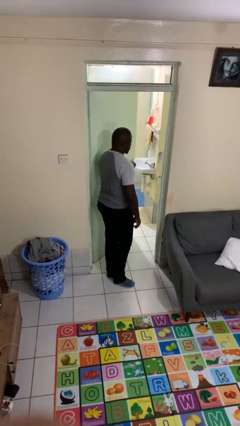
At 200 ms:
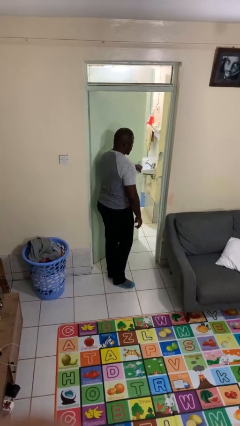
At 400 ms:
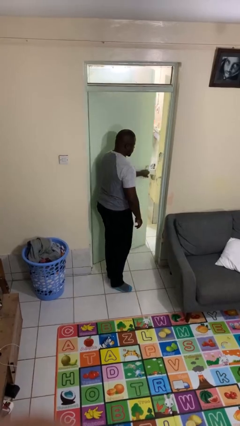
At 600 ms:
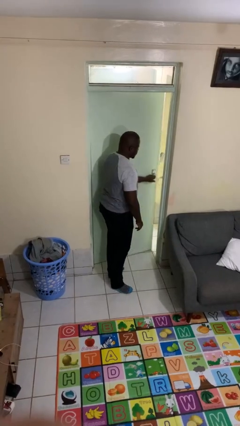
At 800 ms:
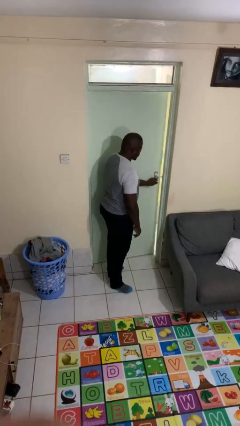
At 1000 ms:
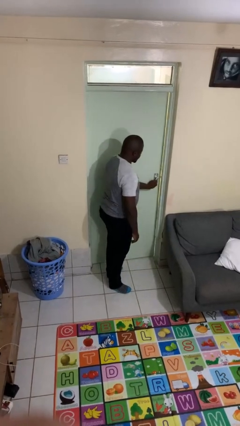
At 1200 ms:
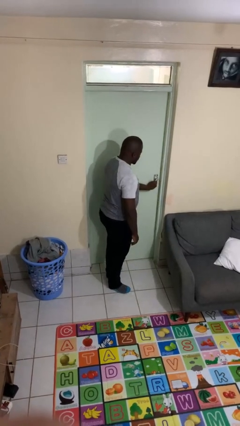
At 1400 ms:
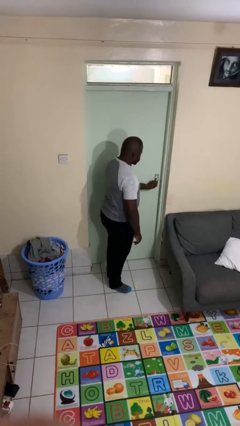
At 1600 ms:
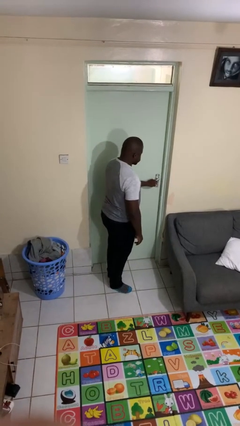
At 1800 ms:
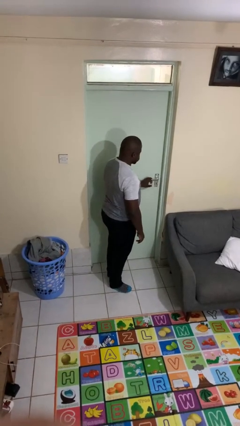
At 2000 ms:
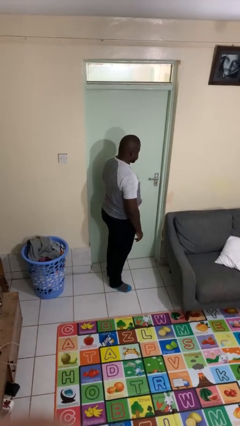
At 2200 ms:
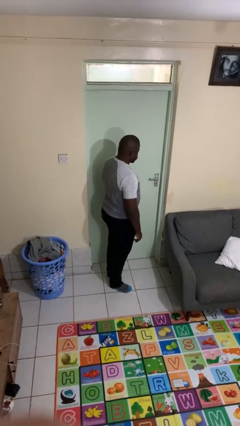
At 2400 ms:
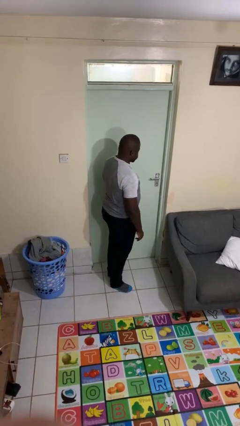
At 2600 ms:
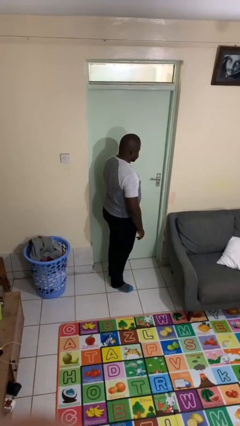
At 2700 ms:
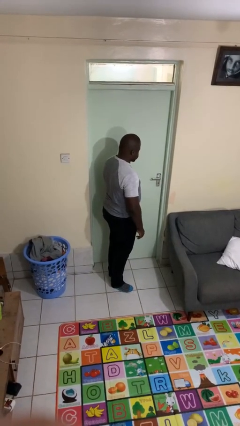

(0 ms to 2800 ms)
person closes facility door

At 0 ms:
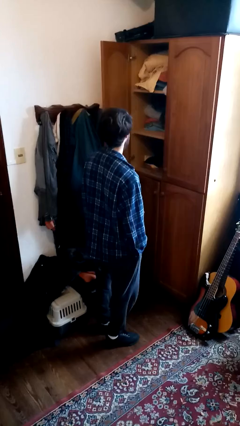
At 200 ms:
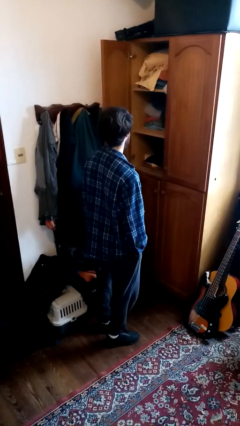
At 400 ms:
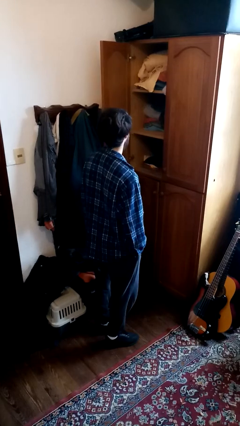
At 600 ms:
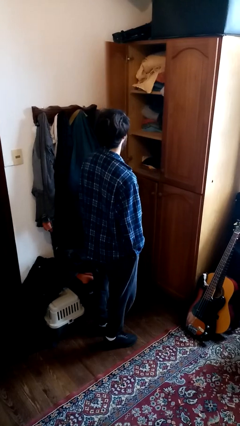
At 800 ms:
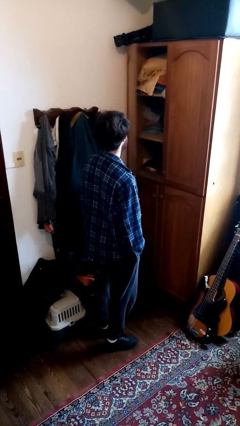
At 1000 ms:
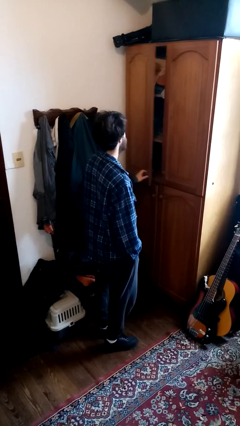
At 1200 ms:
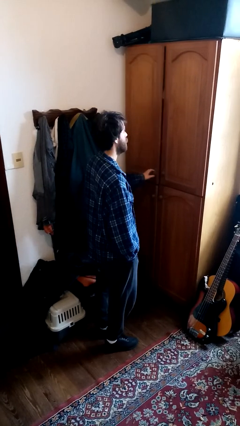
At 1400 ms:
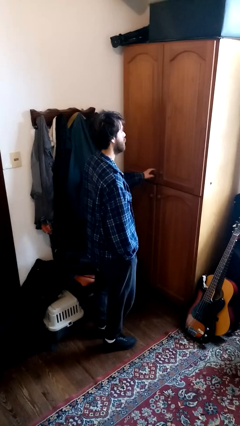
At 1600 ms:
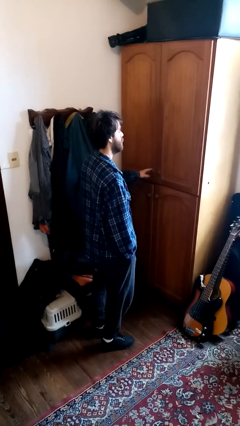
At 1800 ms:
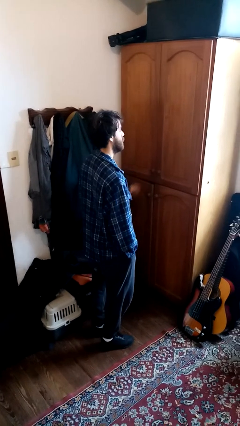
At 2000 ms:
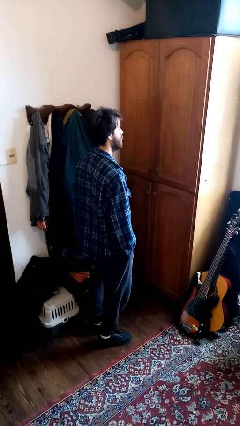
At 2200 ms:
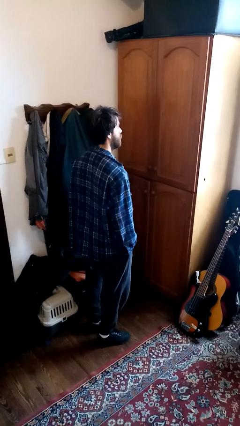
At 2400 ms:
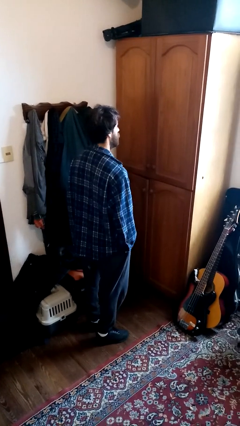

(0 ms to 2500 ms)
person closes dresser drawer

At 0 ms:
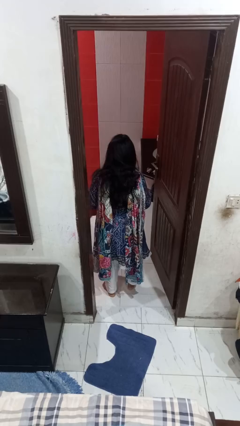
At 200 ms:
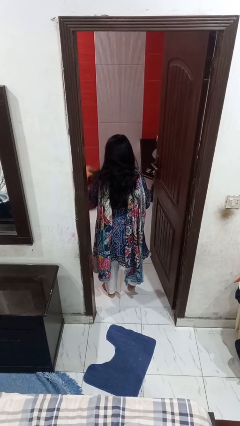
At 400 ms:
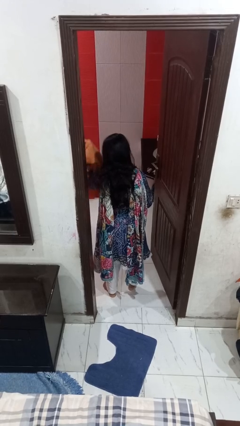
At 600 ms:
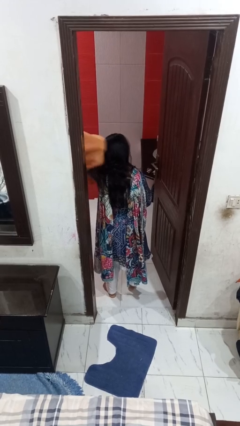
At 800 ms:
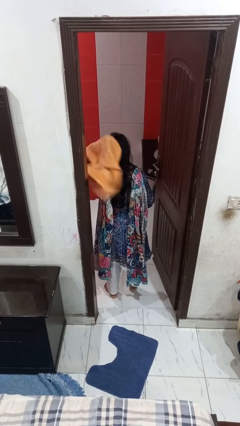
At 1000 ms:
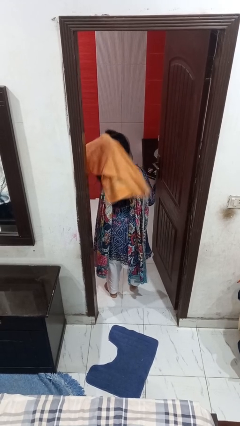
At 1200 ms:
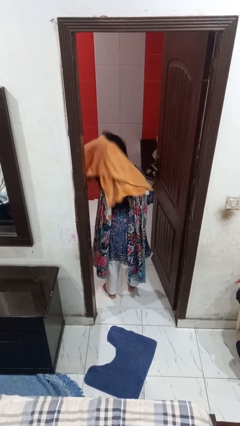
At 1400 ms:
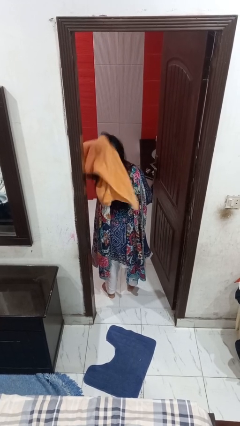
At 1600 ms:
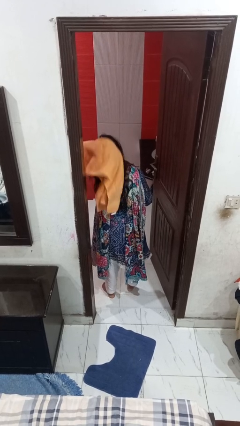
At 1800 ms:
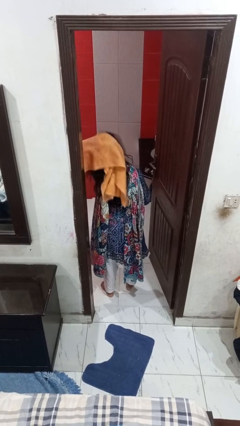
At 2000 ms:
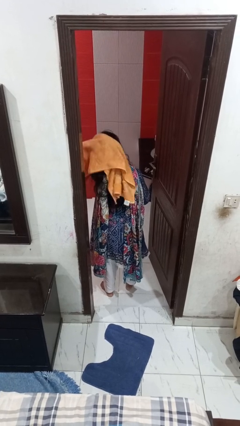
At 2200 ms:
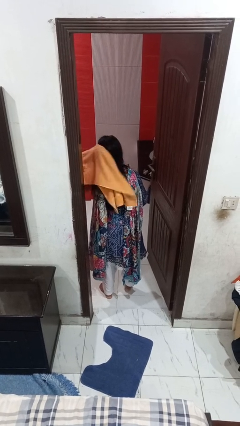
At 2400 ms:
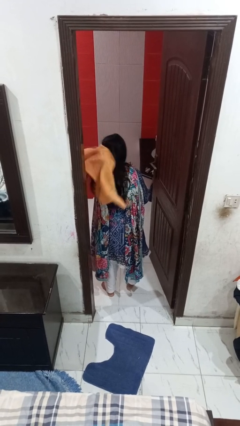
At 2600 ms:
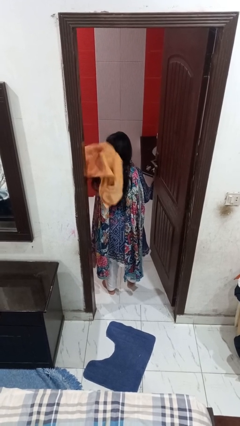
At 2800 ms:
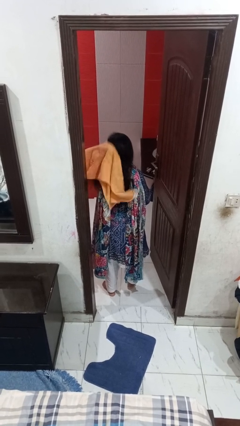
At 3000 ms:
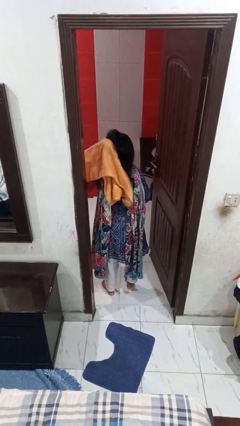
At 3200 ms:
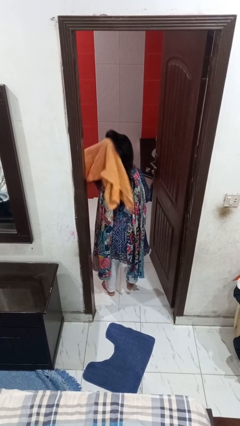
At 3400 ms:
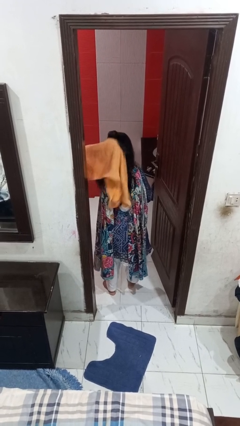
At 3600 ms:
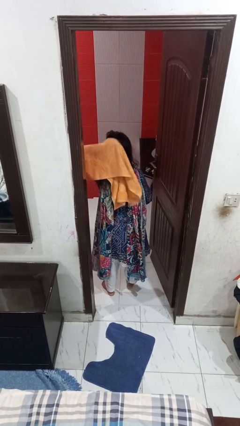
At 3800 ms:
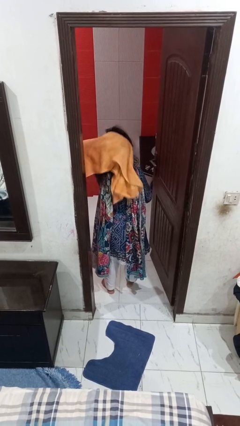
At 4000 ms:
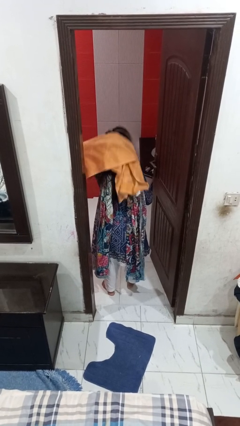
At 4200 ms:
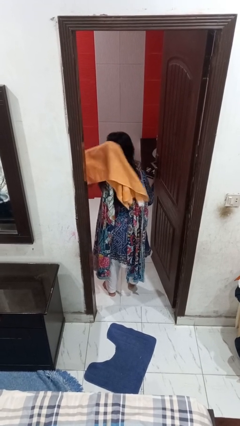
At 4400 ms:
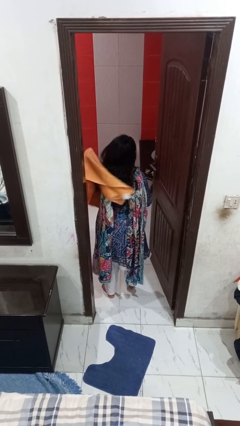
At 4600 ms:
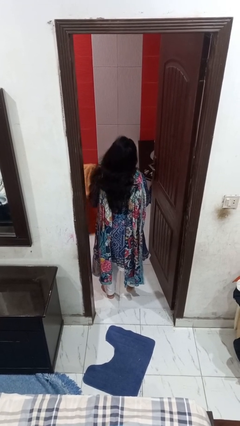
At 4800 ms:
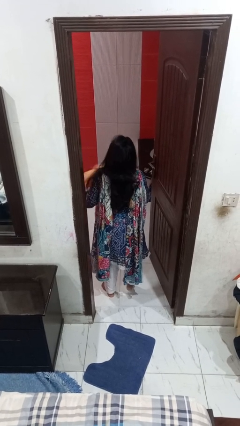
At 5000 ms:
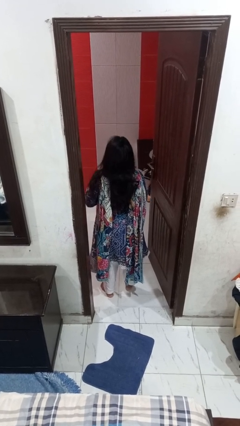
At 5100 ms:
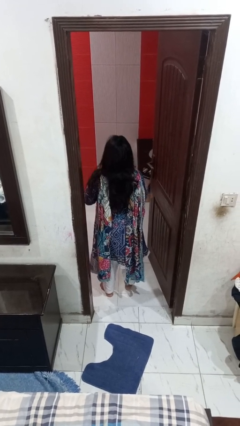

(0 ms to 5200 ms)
person dries hair with towel

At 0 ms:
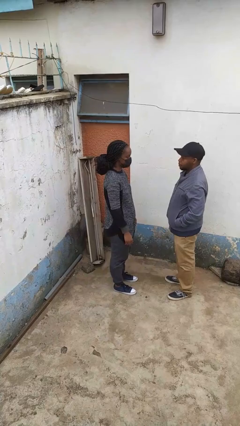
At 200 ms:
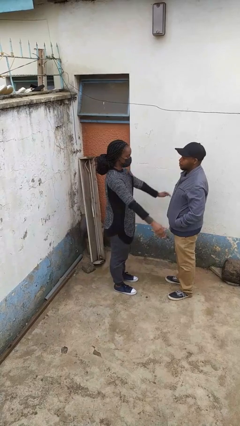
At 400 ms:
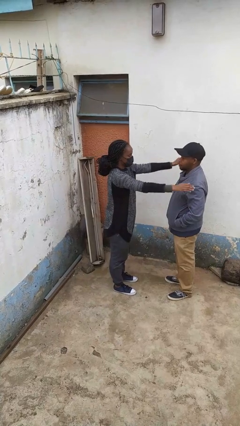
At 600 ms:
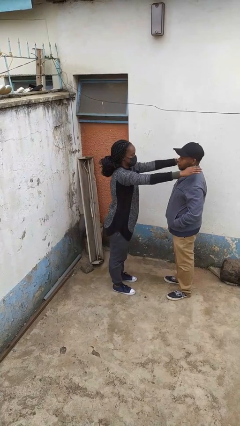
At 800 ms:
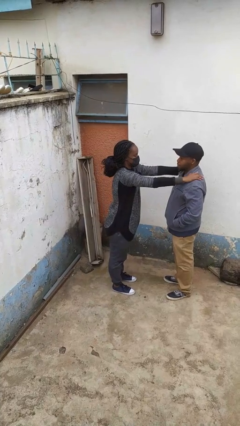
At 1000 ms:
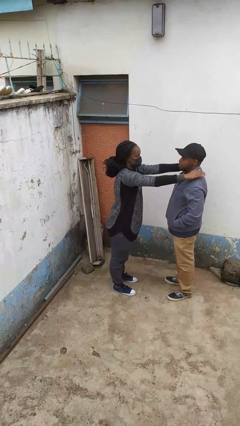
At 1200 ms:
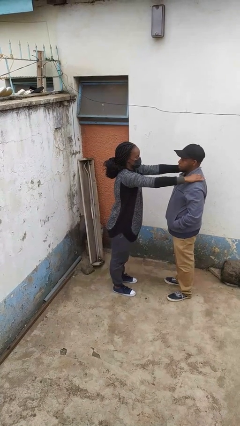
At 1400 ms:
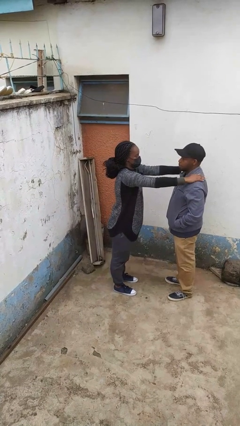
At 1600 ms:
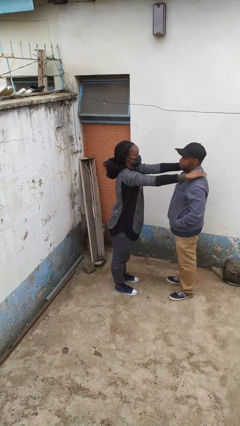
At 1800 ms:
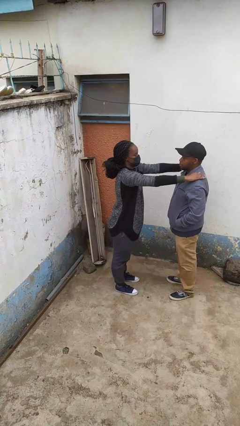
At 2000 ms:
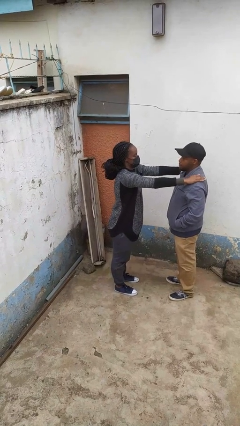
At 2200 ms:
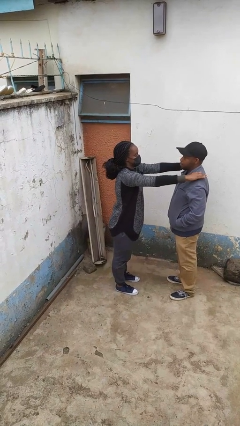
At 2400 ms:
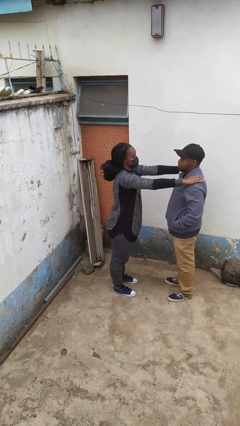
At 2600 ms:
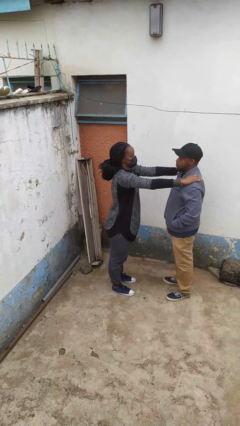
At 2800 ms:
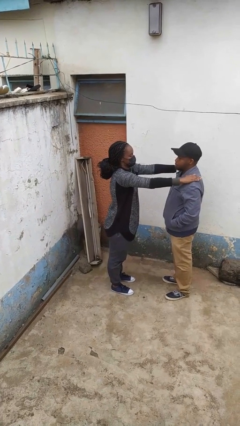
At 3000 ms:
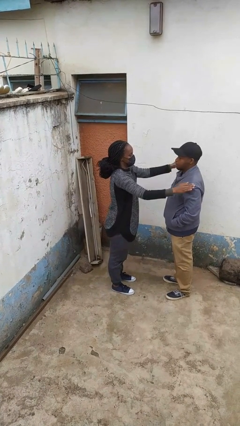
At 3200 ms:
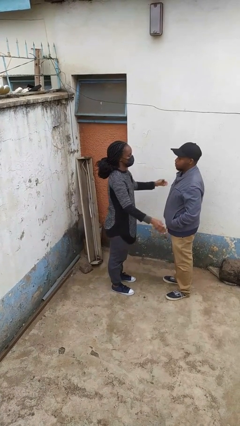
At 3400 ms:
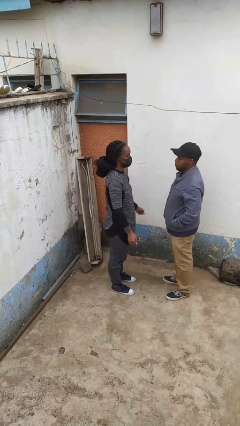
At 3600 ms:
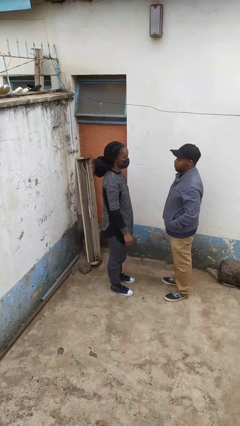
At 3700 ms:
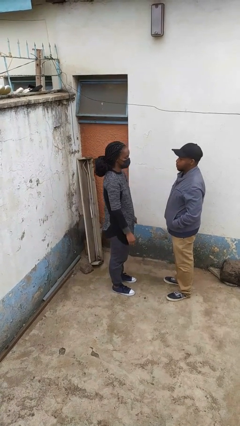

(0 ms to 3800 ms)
person pounds shoulders of person

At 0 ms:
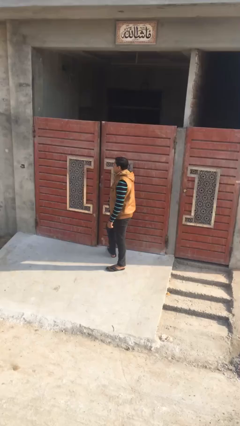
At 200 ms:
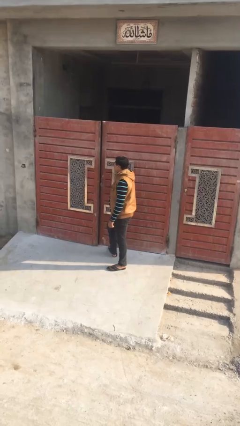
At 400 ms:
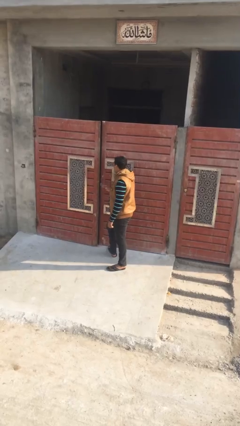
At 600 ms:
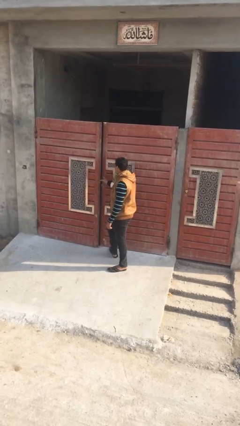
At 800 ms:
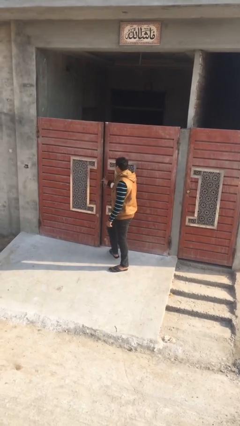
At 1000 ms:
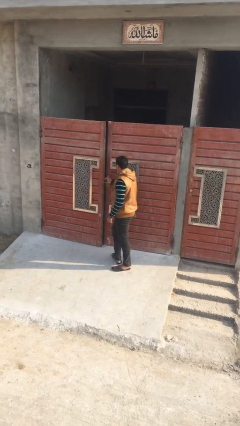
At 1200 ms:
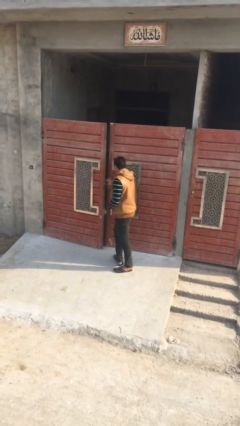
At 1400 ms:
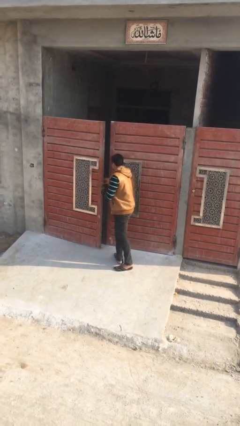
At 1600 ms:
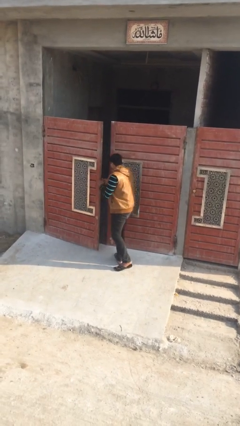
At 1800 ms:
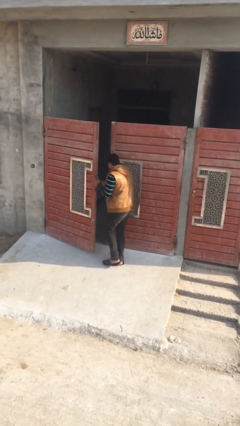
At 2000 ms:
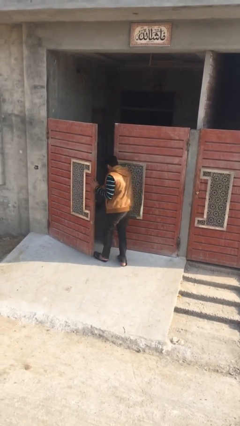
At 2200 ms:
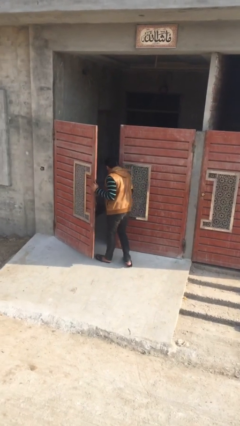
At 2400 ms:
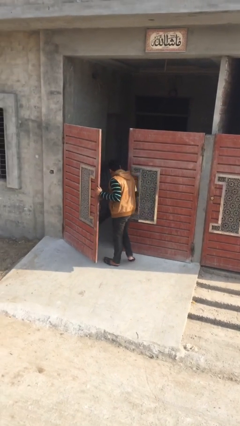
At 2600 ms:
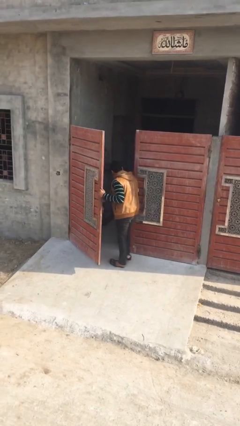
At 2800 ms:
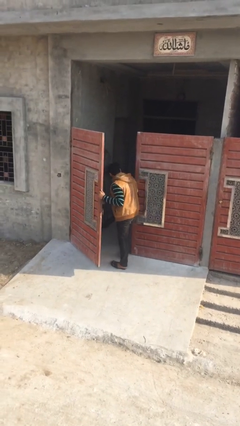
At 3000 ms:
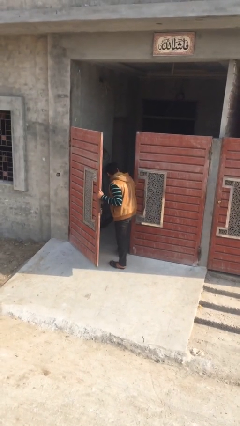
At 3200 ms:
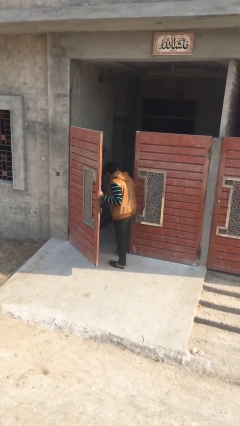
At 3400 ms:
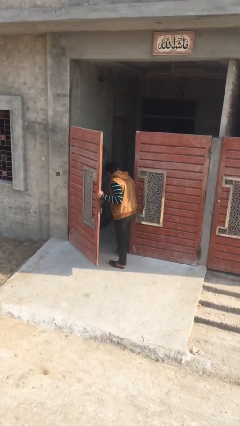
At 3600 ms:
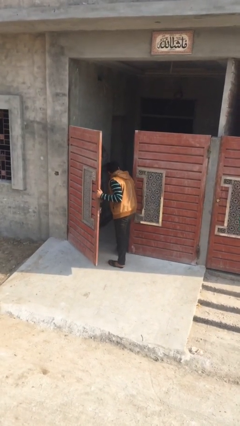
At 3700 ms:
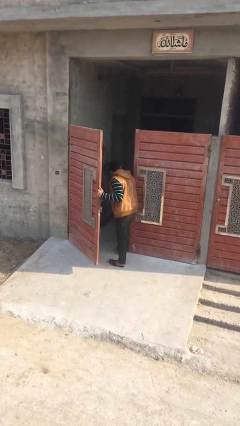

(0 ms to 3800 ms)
person opens facility door
